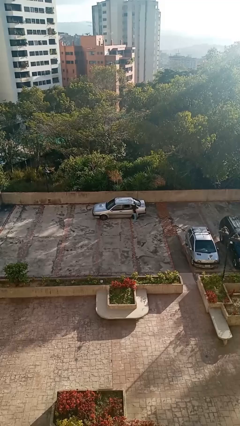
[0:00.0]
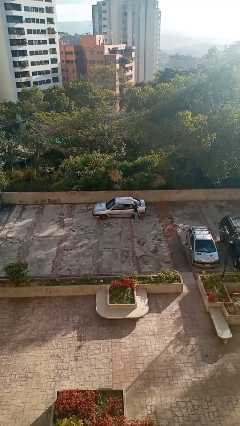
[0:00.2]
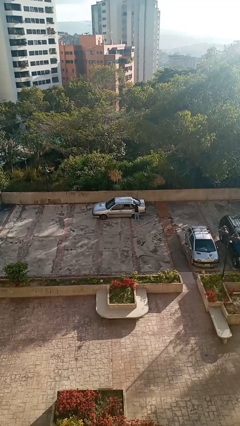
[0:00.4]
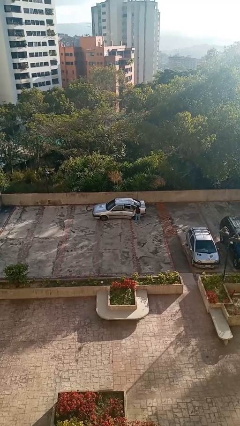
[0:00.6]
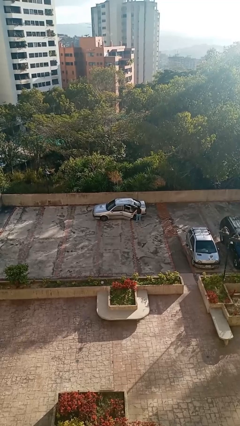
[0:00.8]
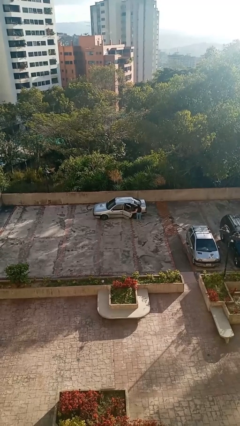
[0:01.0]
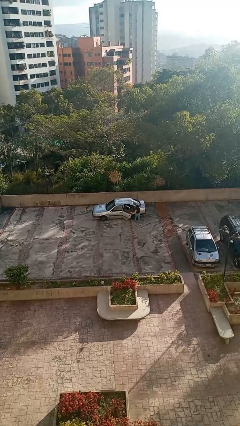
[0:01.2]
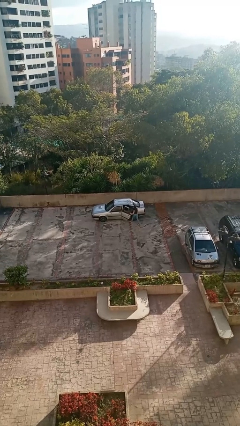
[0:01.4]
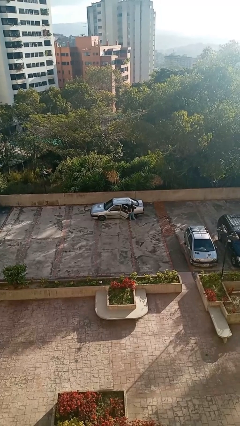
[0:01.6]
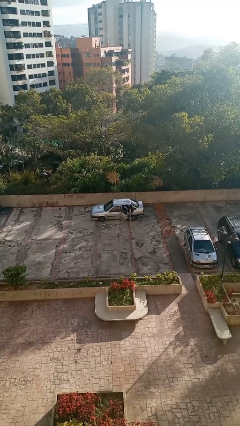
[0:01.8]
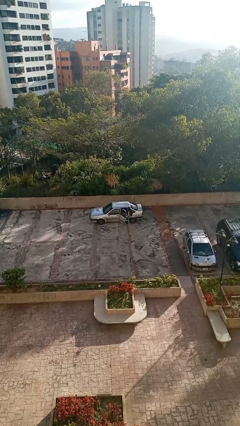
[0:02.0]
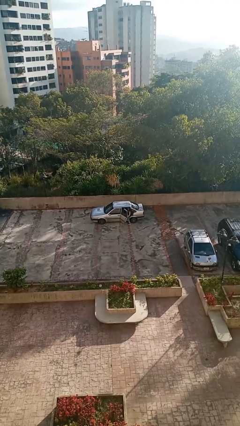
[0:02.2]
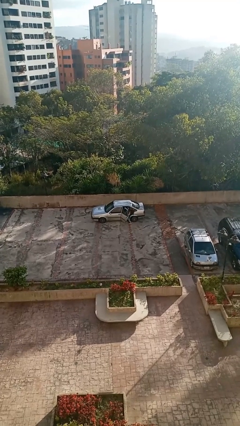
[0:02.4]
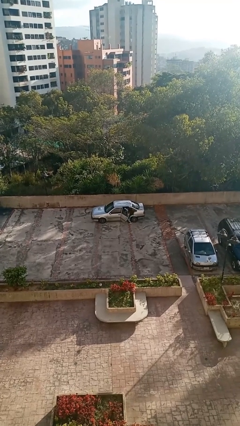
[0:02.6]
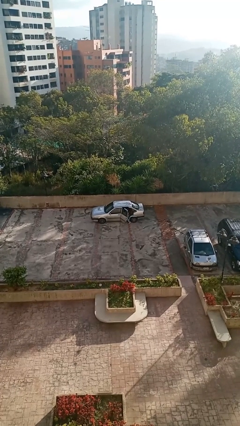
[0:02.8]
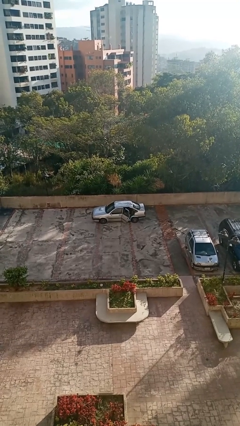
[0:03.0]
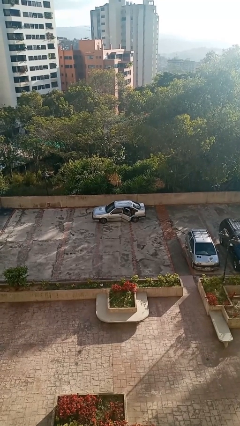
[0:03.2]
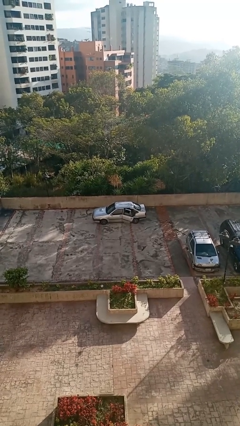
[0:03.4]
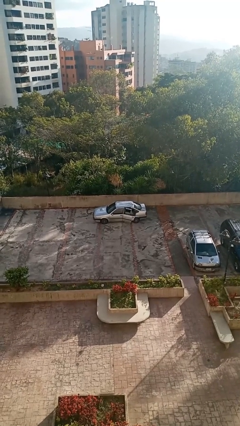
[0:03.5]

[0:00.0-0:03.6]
car picks up person

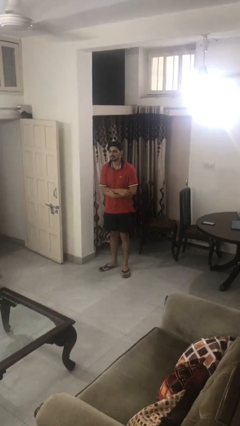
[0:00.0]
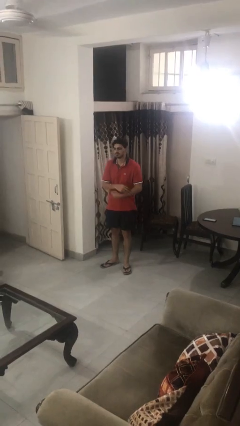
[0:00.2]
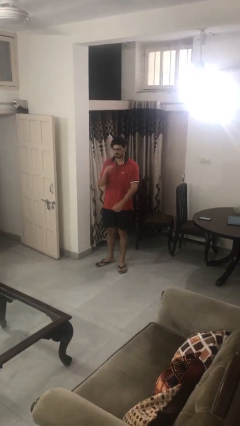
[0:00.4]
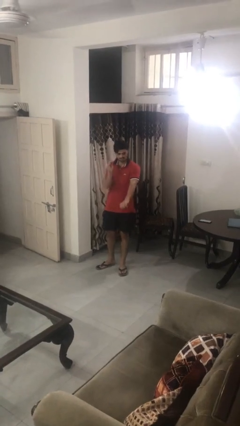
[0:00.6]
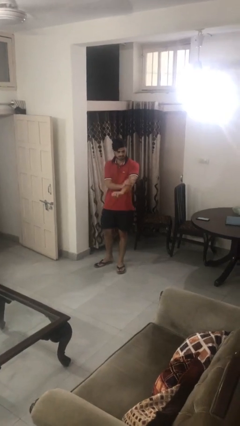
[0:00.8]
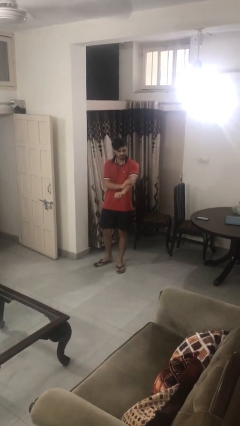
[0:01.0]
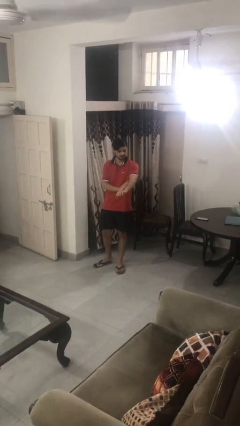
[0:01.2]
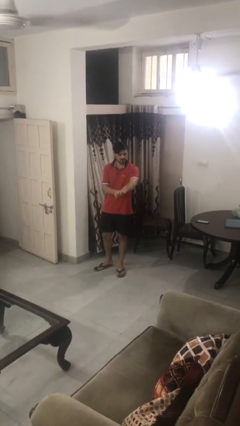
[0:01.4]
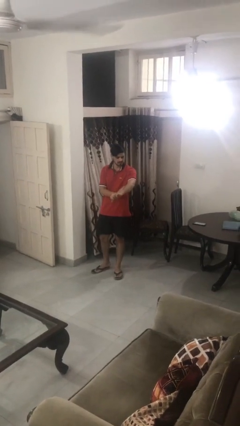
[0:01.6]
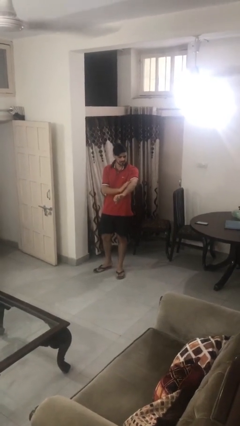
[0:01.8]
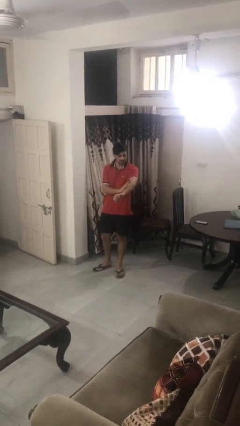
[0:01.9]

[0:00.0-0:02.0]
person swats bug

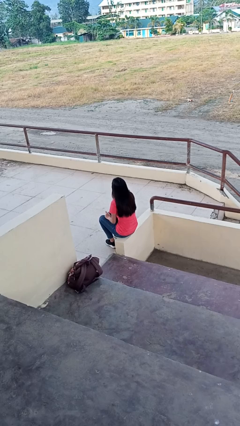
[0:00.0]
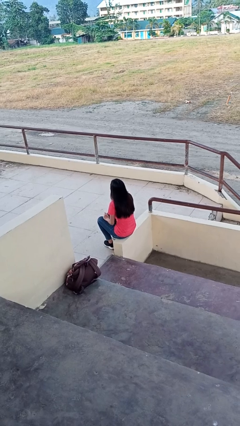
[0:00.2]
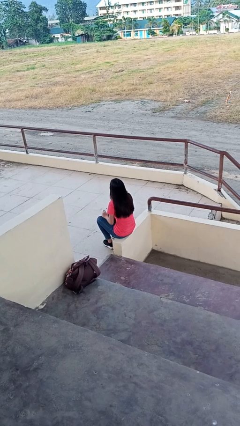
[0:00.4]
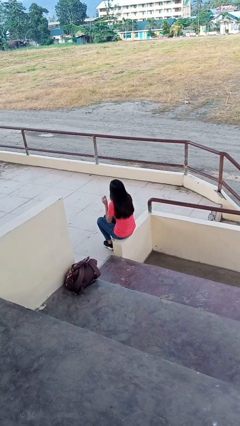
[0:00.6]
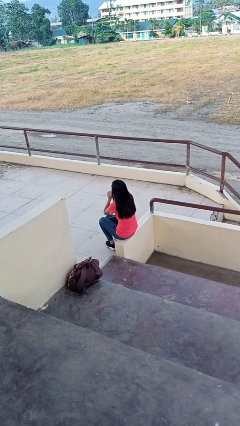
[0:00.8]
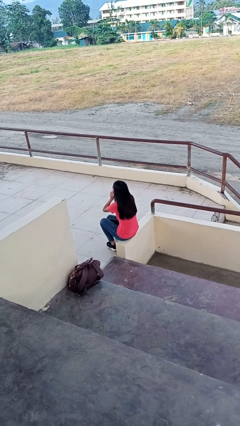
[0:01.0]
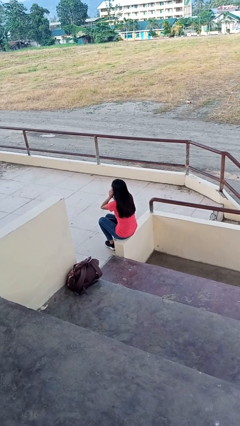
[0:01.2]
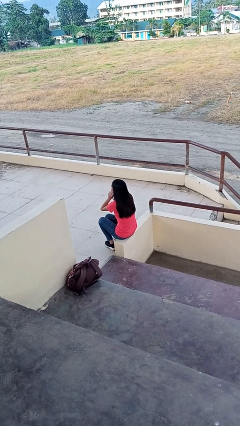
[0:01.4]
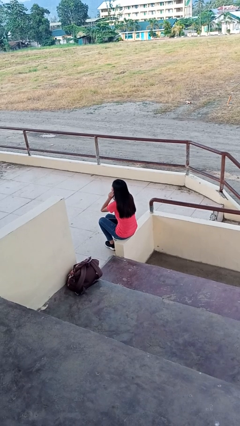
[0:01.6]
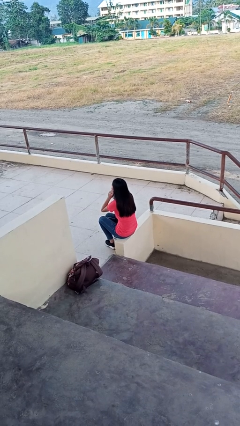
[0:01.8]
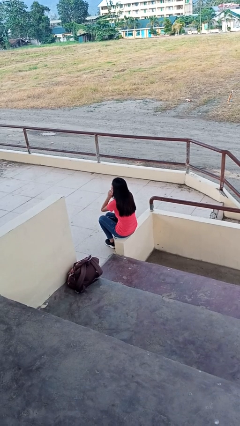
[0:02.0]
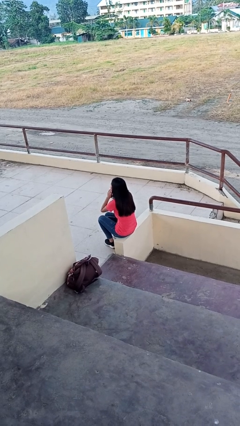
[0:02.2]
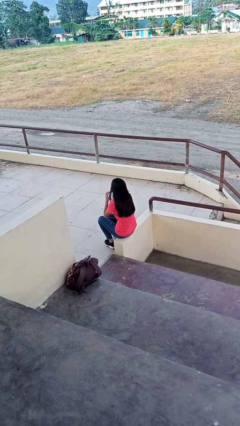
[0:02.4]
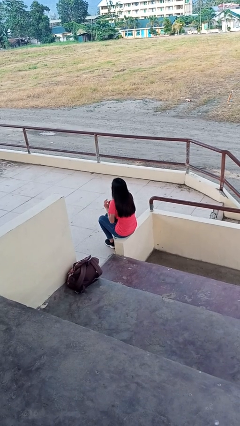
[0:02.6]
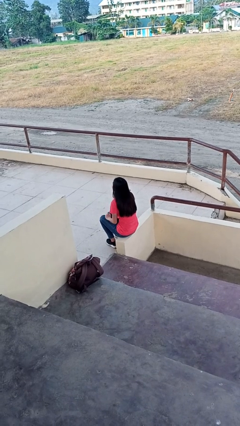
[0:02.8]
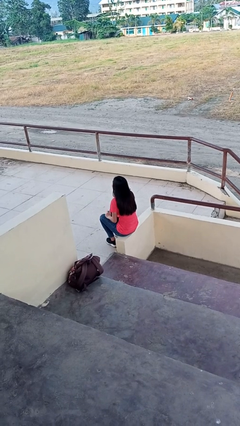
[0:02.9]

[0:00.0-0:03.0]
person puts on headphones

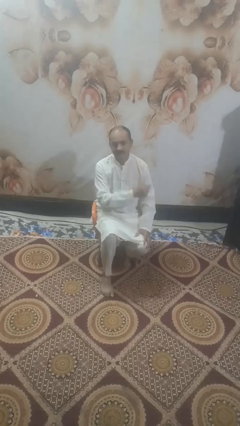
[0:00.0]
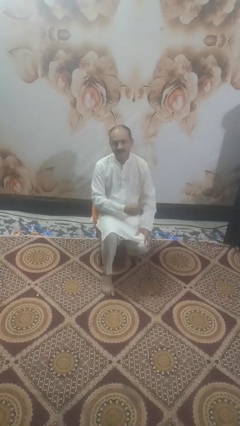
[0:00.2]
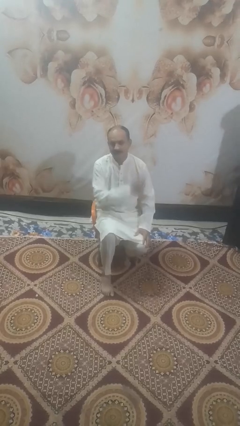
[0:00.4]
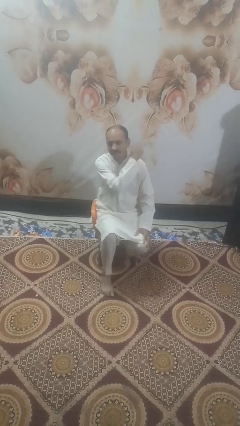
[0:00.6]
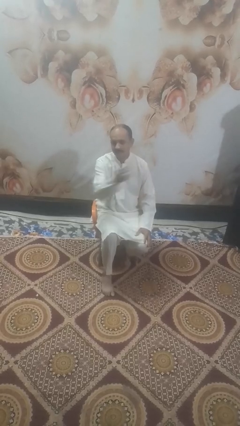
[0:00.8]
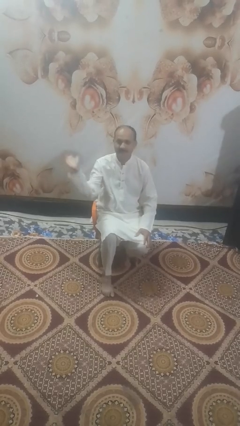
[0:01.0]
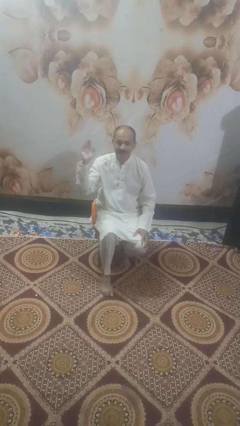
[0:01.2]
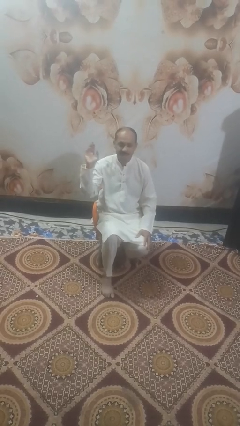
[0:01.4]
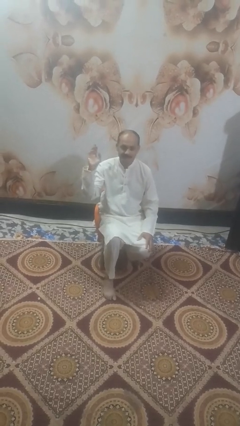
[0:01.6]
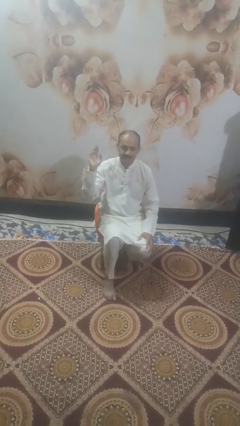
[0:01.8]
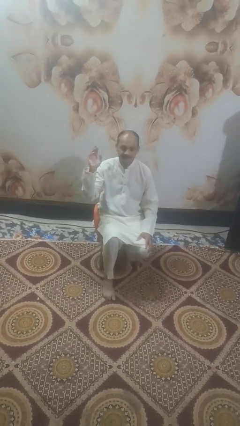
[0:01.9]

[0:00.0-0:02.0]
person gestures swipe right

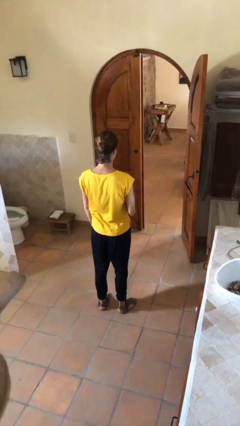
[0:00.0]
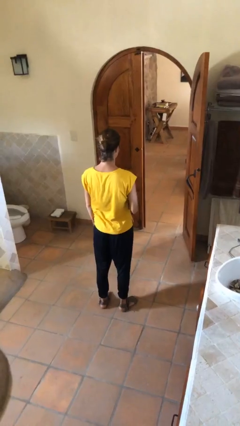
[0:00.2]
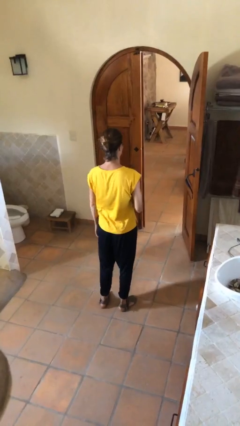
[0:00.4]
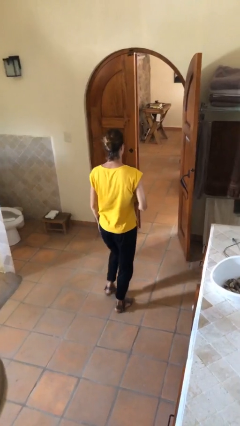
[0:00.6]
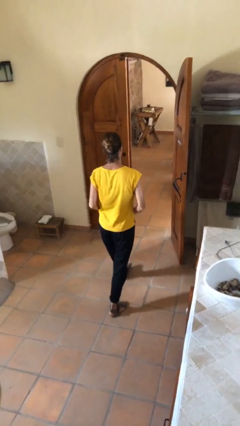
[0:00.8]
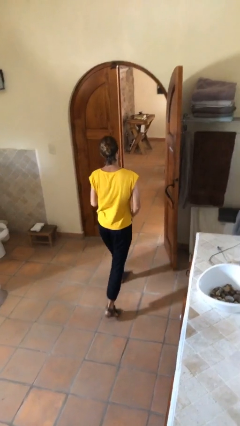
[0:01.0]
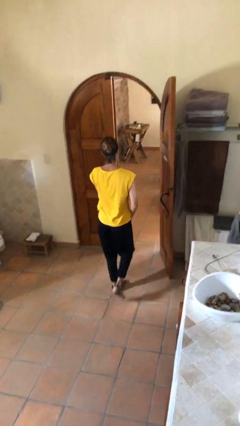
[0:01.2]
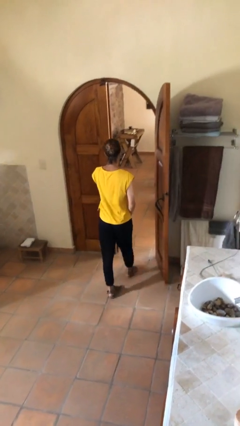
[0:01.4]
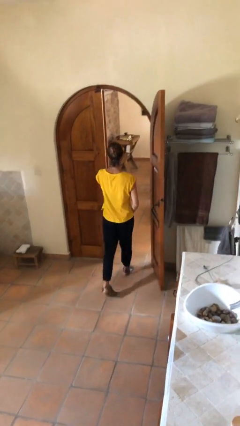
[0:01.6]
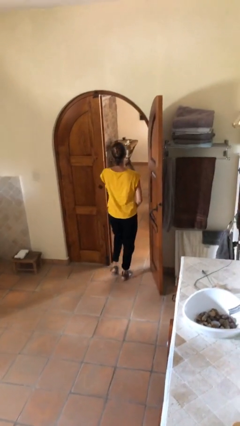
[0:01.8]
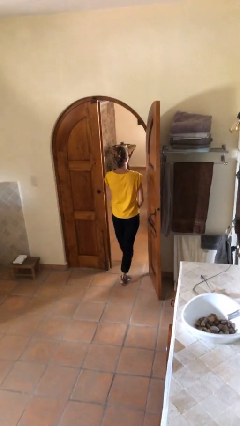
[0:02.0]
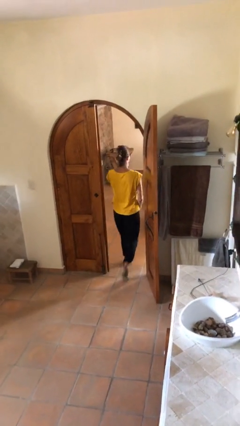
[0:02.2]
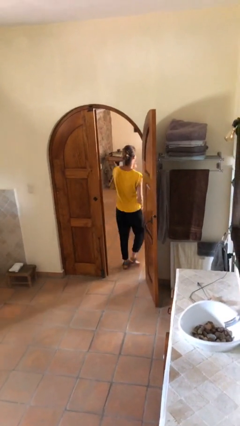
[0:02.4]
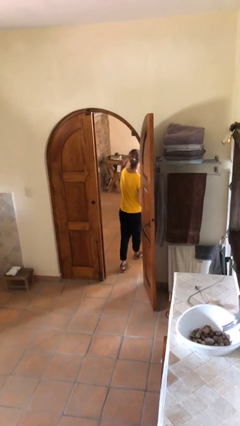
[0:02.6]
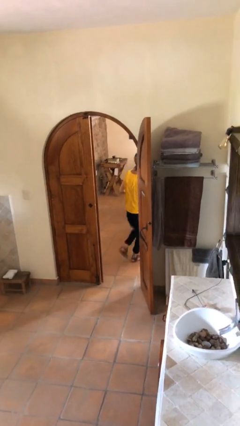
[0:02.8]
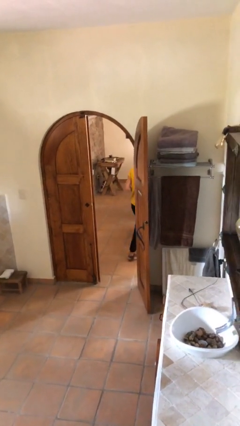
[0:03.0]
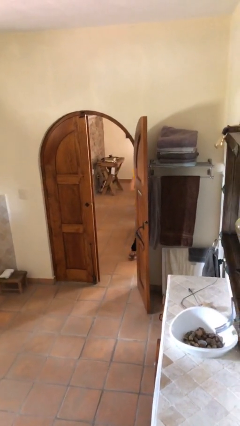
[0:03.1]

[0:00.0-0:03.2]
person exits scene through structure

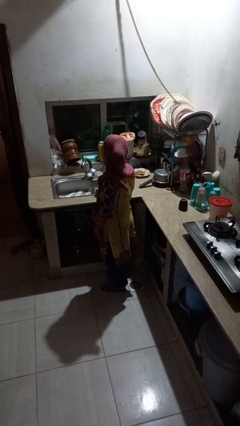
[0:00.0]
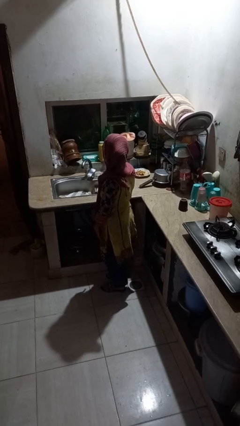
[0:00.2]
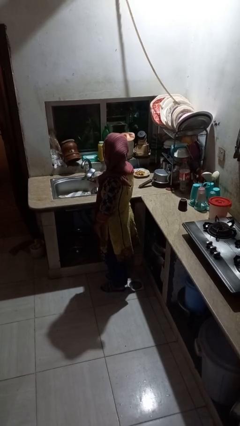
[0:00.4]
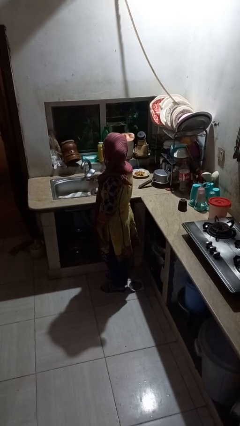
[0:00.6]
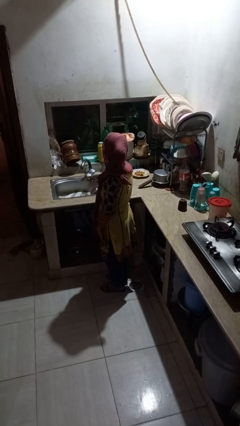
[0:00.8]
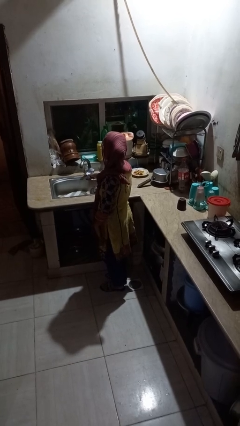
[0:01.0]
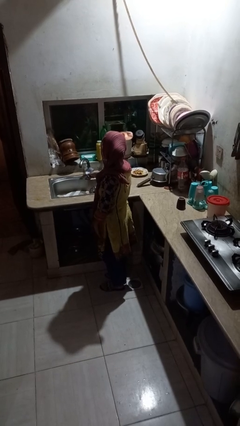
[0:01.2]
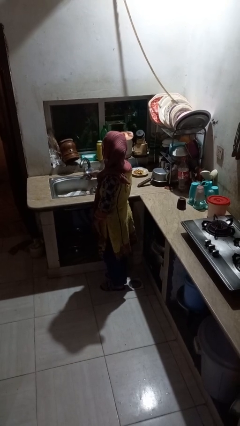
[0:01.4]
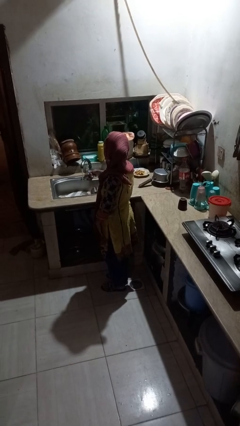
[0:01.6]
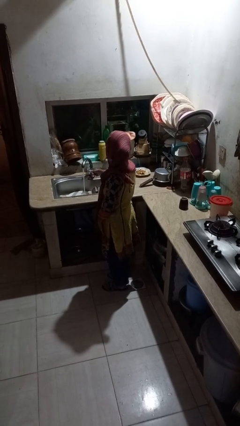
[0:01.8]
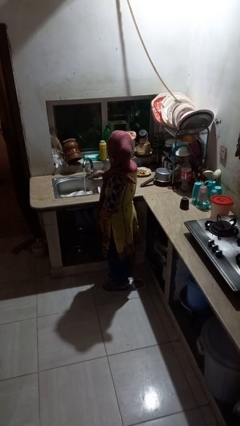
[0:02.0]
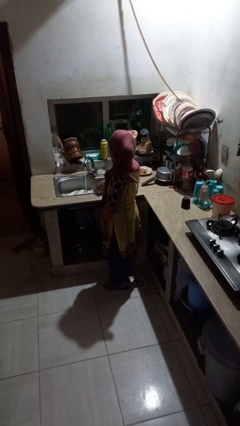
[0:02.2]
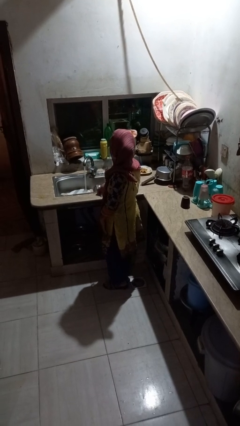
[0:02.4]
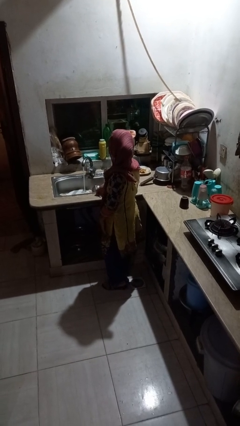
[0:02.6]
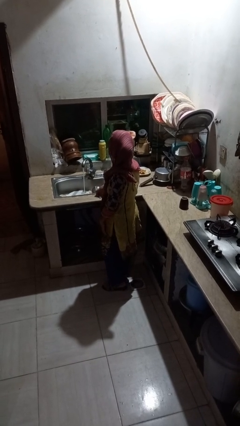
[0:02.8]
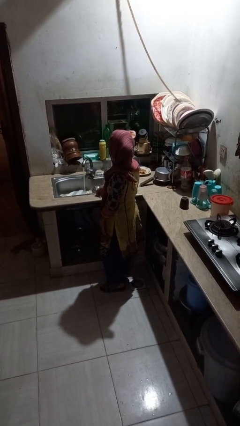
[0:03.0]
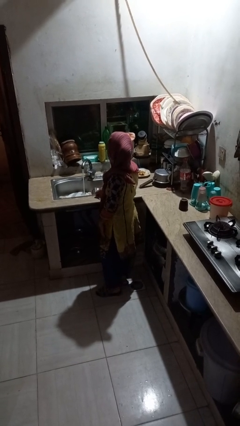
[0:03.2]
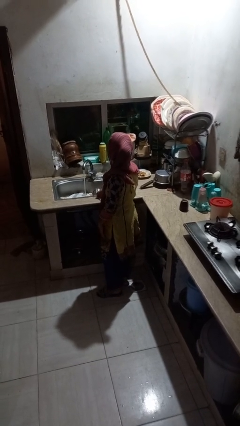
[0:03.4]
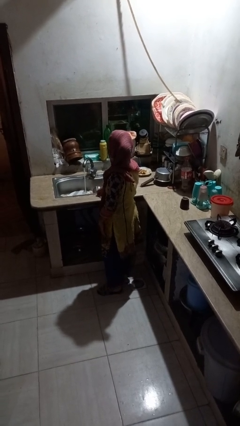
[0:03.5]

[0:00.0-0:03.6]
person turns on faucet

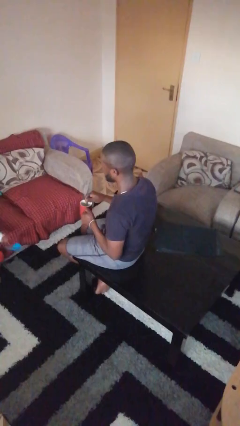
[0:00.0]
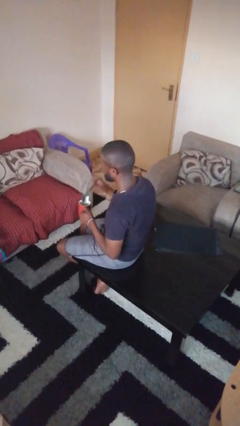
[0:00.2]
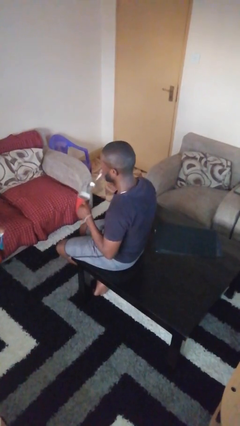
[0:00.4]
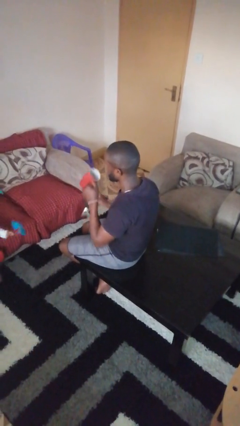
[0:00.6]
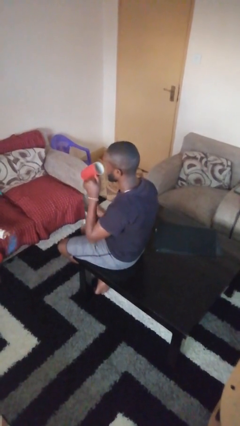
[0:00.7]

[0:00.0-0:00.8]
person drinks from mug
